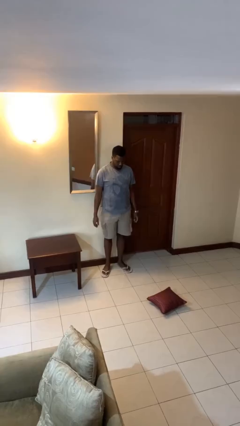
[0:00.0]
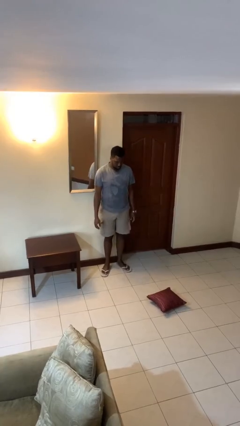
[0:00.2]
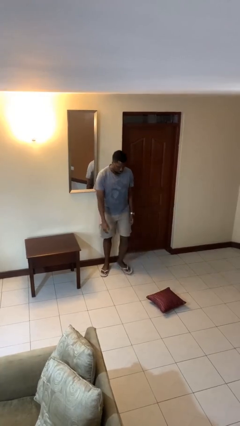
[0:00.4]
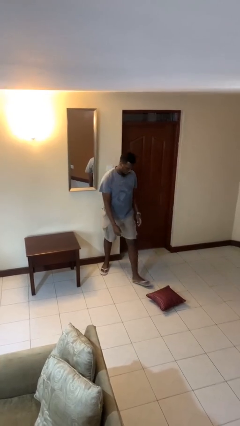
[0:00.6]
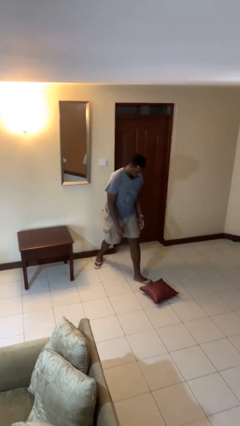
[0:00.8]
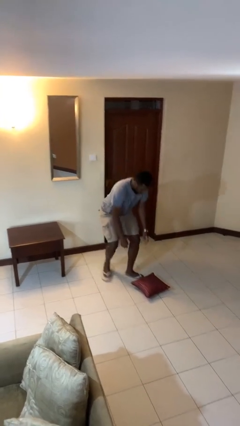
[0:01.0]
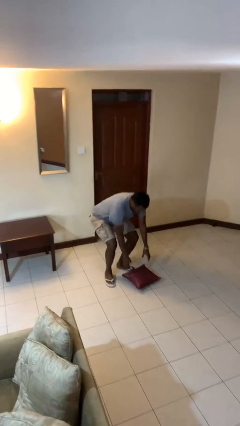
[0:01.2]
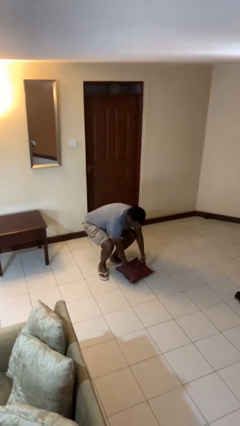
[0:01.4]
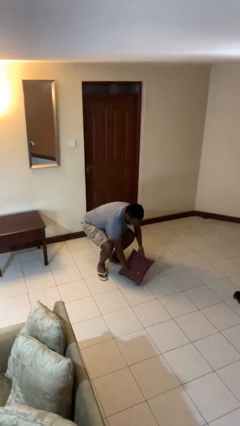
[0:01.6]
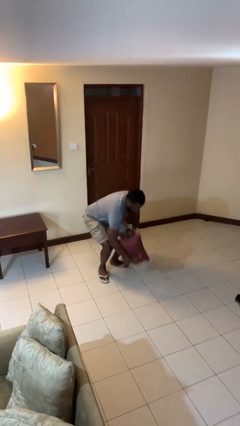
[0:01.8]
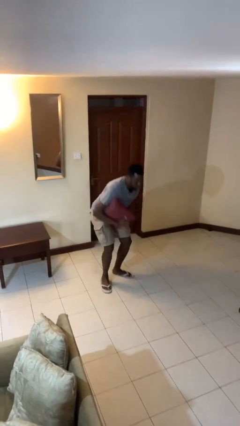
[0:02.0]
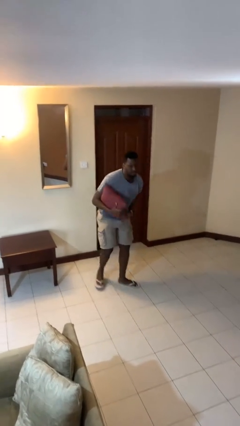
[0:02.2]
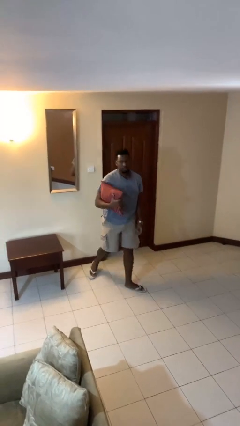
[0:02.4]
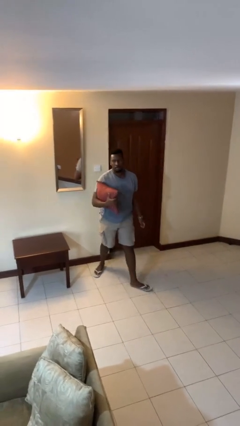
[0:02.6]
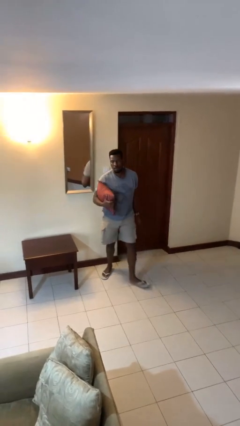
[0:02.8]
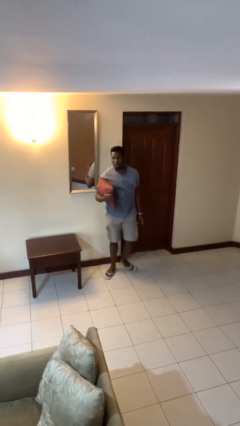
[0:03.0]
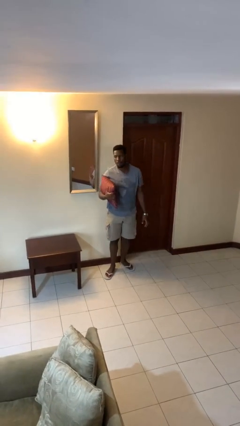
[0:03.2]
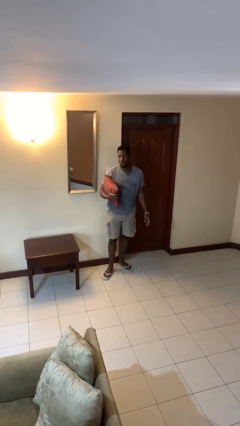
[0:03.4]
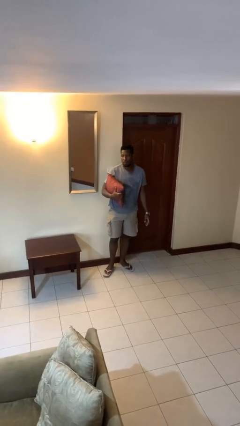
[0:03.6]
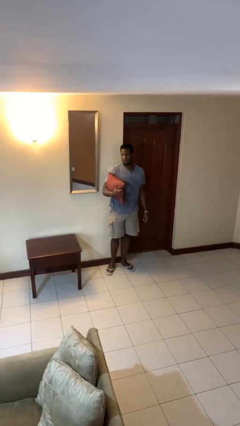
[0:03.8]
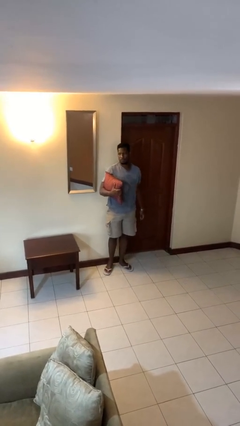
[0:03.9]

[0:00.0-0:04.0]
person picks up object from floor

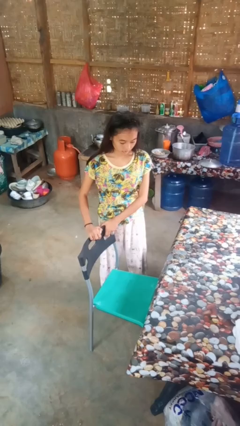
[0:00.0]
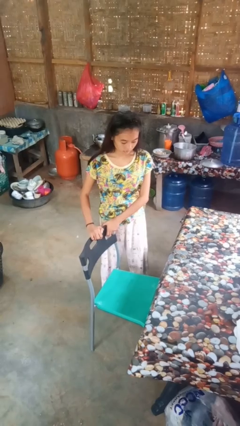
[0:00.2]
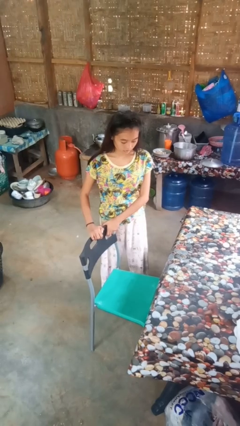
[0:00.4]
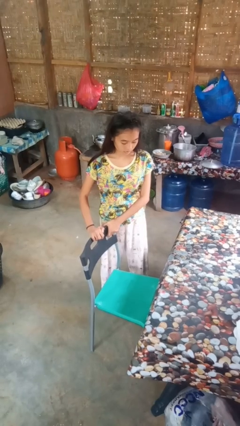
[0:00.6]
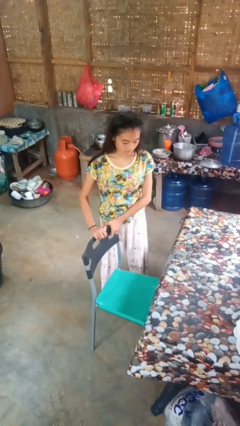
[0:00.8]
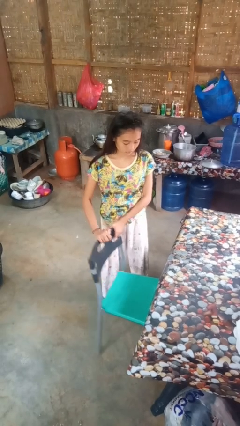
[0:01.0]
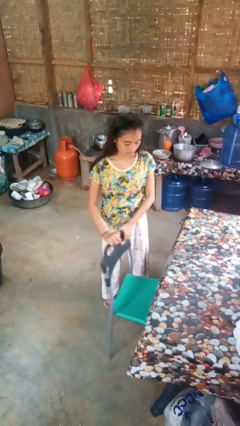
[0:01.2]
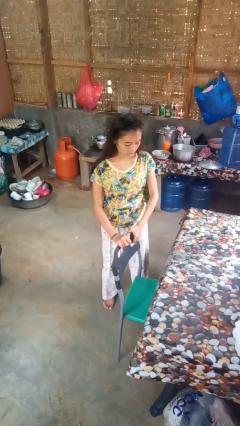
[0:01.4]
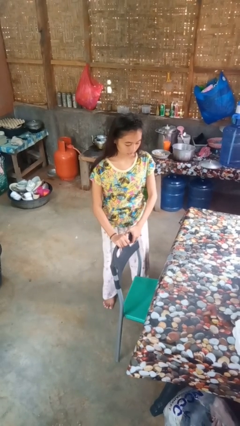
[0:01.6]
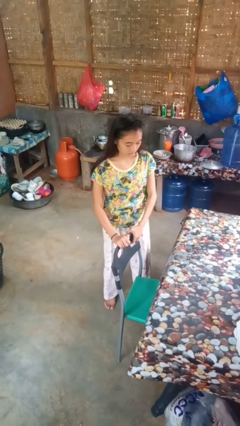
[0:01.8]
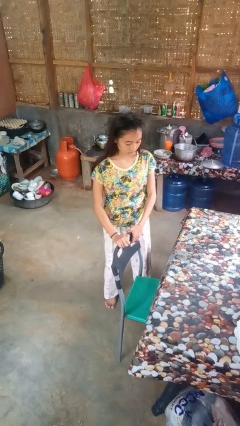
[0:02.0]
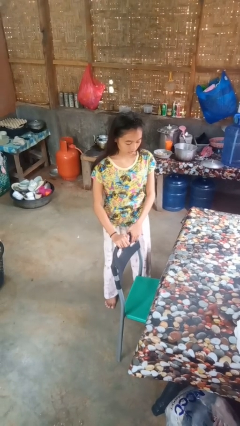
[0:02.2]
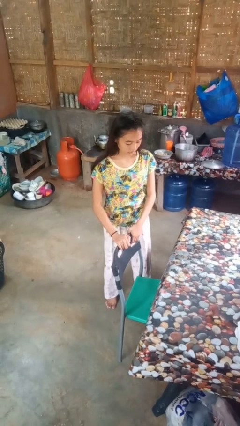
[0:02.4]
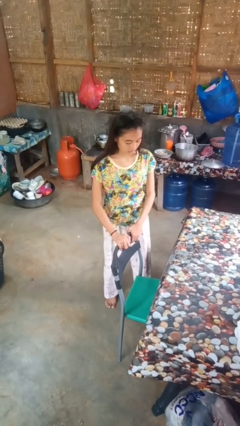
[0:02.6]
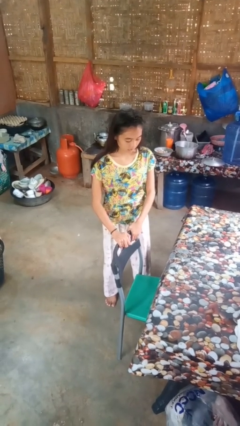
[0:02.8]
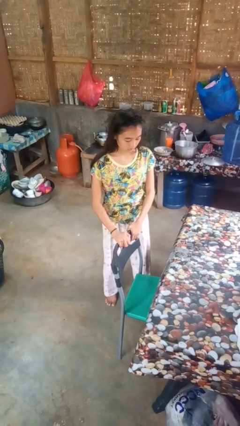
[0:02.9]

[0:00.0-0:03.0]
person pushes in chair

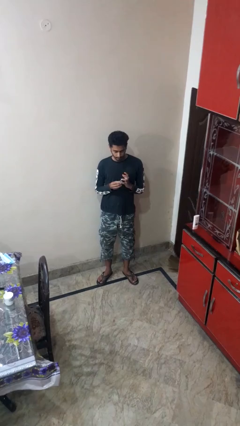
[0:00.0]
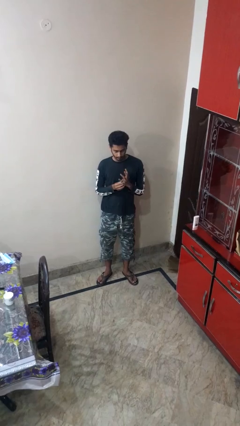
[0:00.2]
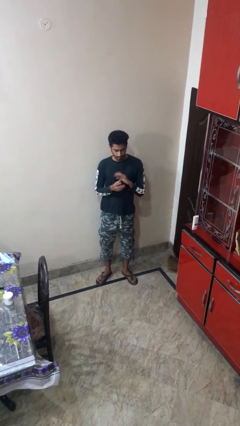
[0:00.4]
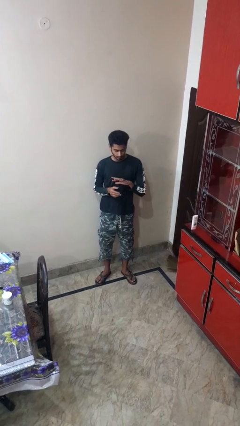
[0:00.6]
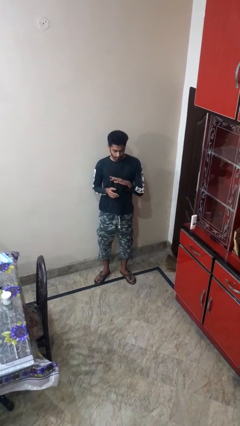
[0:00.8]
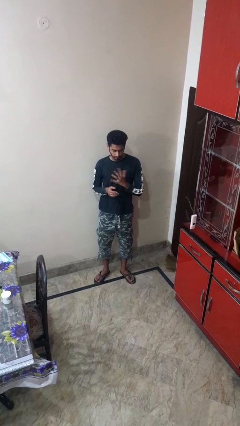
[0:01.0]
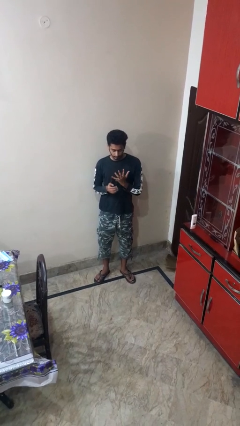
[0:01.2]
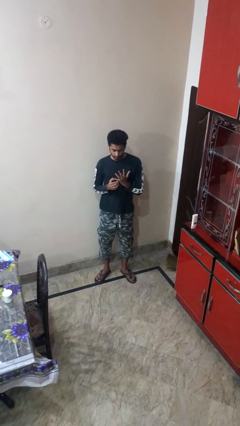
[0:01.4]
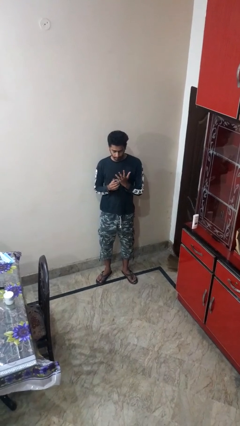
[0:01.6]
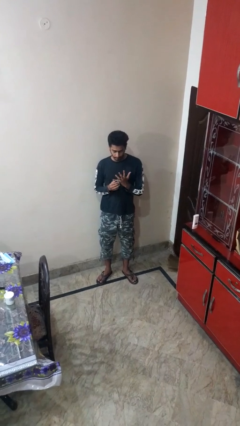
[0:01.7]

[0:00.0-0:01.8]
person puts on ring

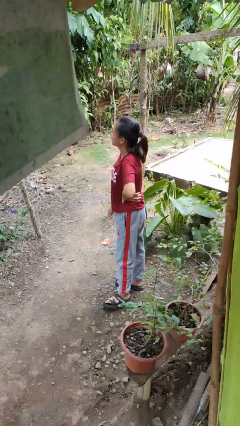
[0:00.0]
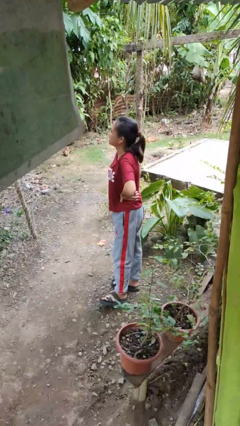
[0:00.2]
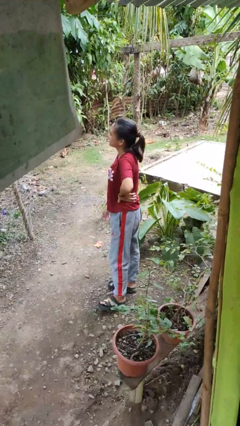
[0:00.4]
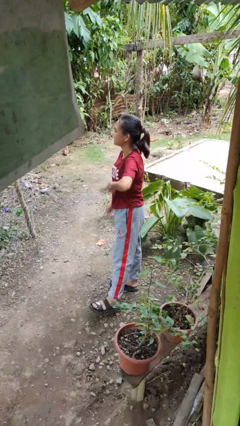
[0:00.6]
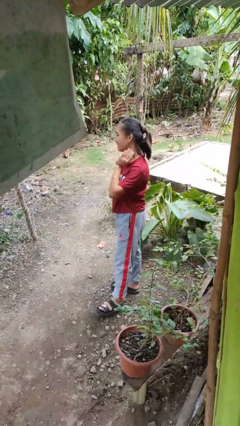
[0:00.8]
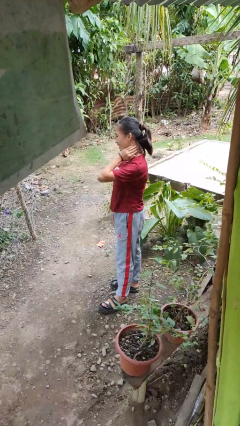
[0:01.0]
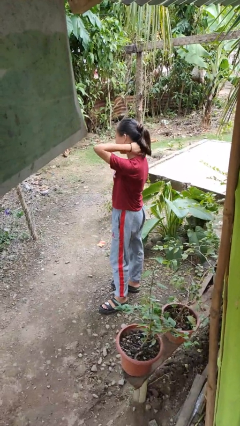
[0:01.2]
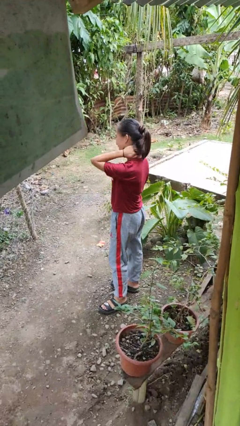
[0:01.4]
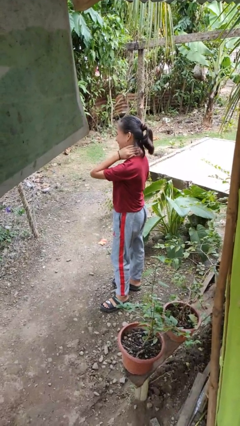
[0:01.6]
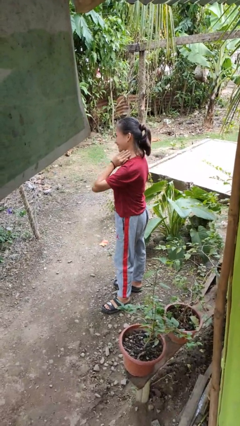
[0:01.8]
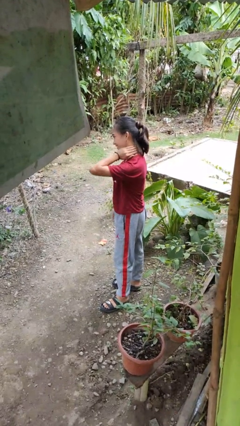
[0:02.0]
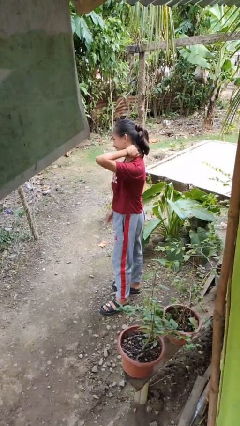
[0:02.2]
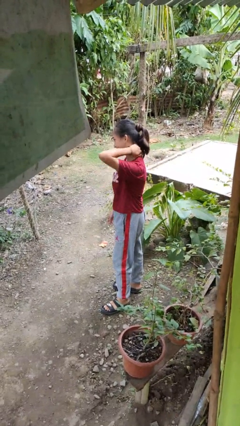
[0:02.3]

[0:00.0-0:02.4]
person rubs neck

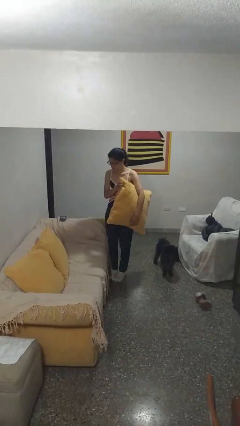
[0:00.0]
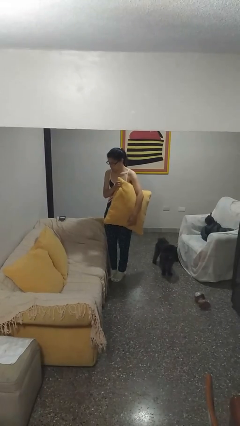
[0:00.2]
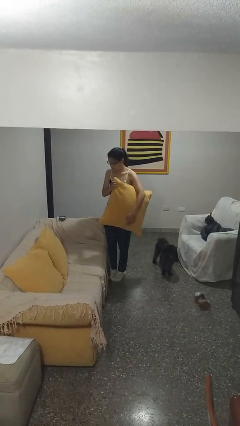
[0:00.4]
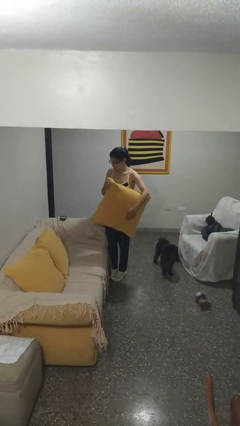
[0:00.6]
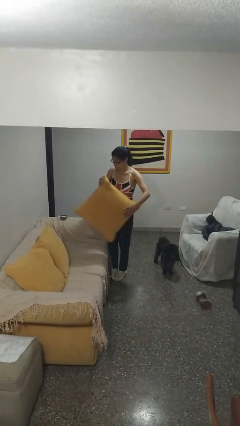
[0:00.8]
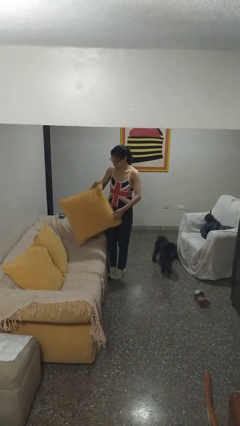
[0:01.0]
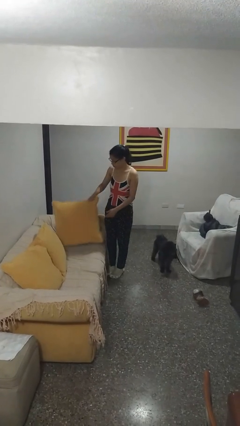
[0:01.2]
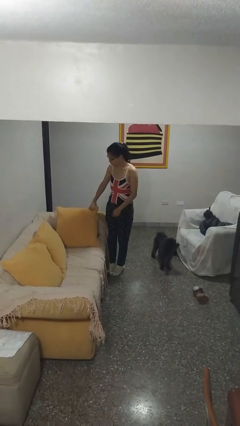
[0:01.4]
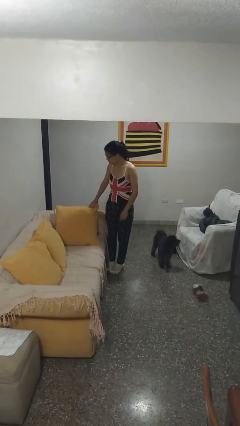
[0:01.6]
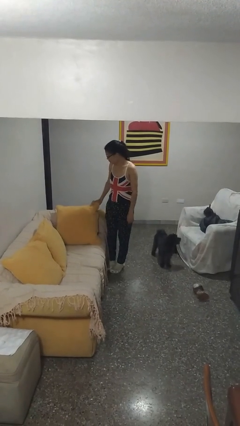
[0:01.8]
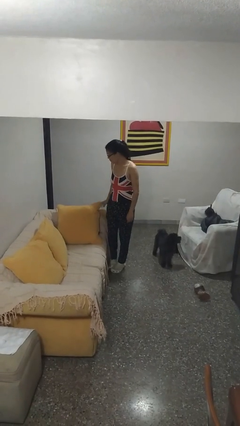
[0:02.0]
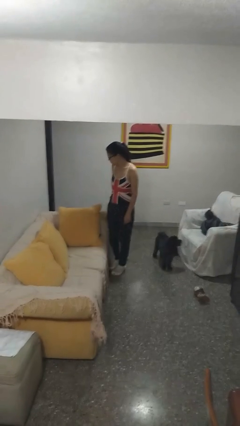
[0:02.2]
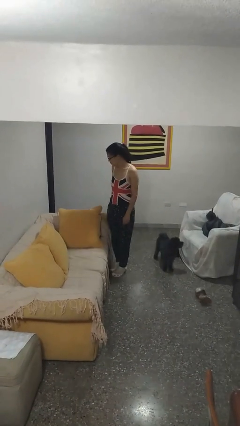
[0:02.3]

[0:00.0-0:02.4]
person puts down object on couch

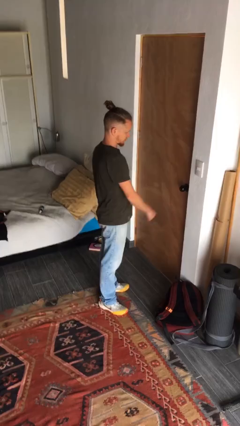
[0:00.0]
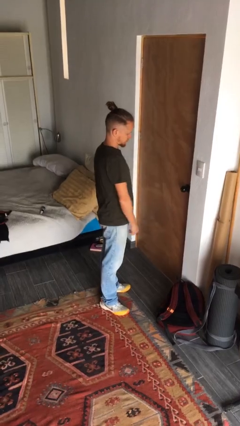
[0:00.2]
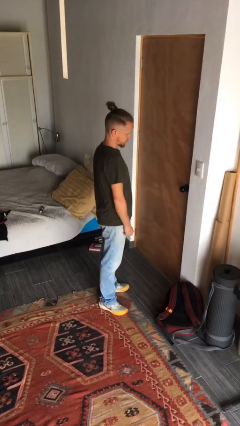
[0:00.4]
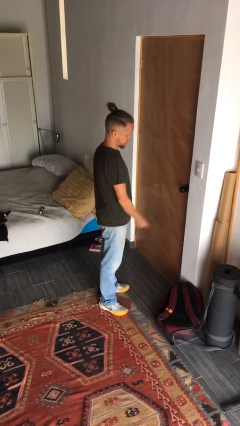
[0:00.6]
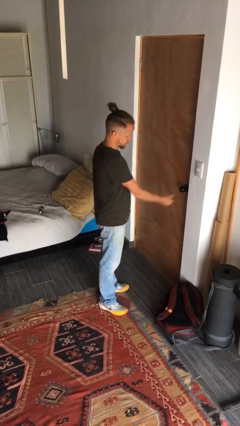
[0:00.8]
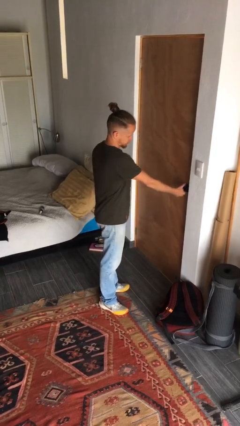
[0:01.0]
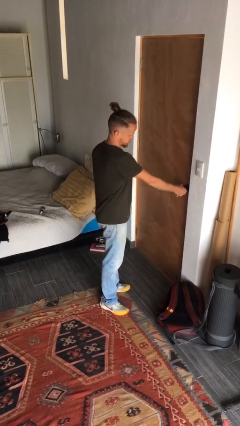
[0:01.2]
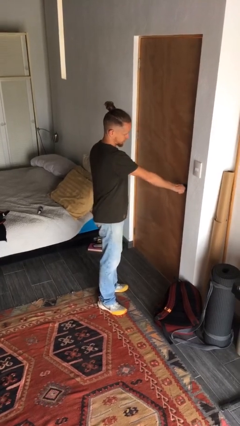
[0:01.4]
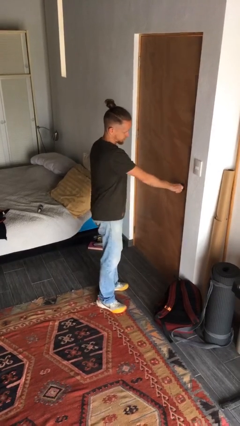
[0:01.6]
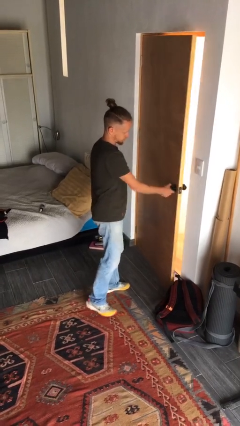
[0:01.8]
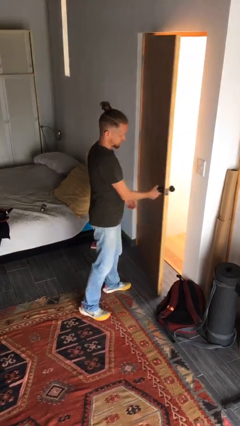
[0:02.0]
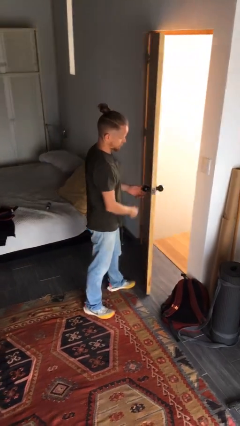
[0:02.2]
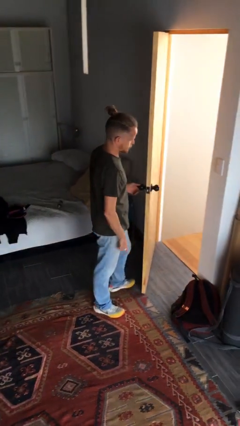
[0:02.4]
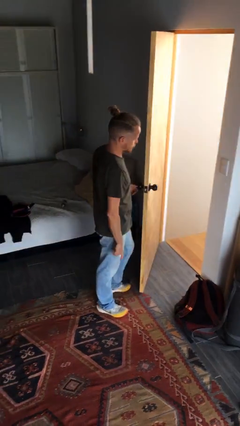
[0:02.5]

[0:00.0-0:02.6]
person opens facility door

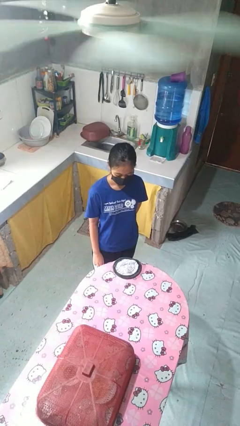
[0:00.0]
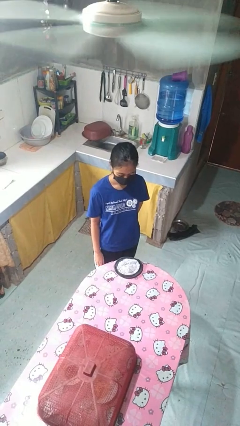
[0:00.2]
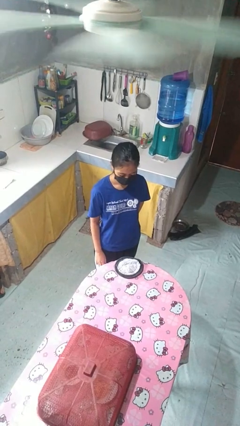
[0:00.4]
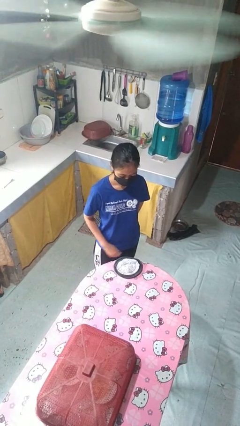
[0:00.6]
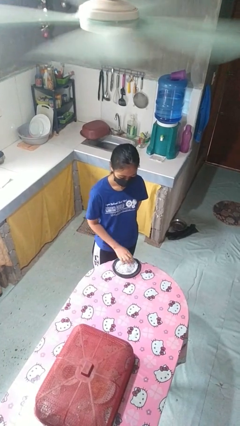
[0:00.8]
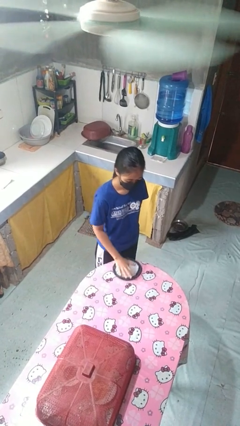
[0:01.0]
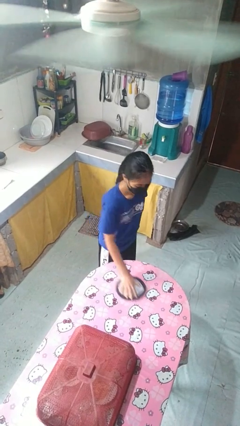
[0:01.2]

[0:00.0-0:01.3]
person cleans table with rag
